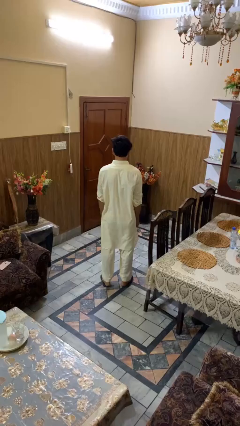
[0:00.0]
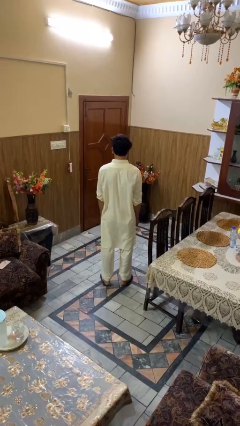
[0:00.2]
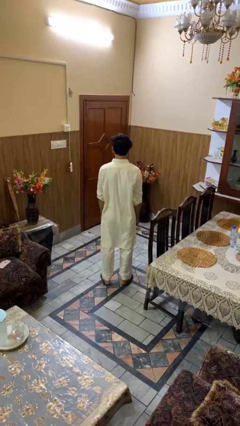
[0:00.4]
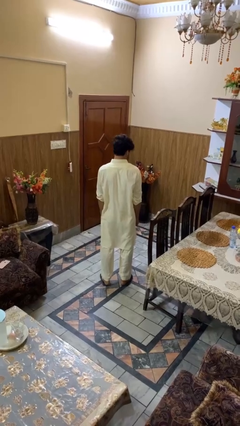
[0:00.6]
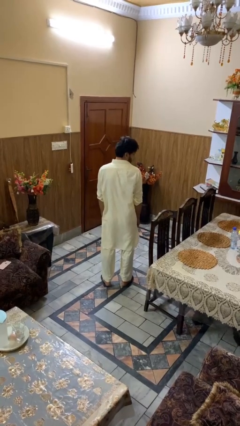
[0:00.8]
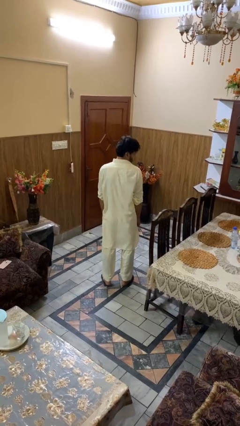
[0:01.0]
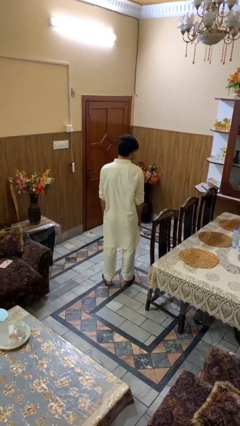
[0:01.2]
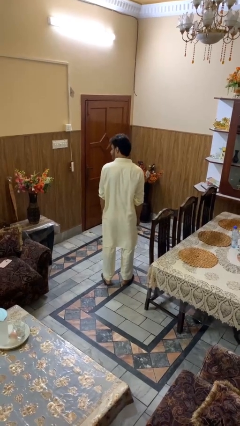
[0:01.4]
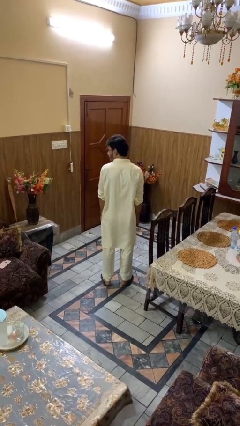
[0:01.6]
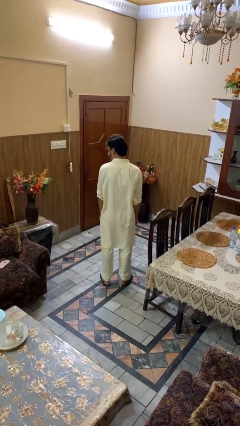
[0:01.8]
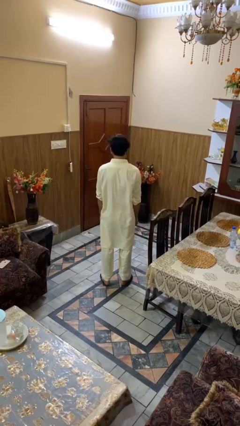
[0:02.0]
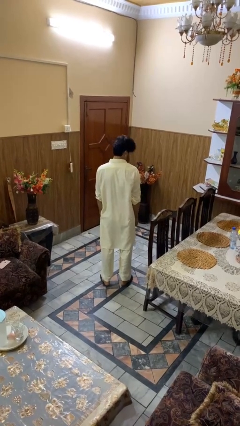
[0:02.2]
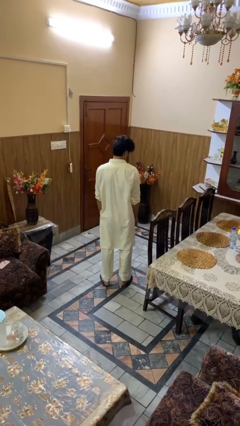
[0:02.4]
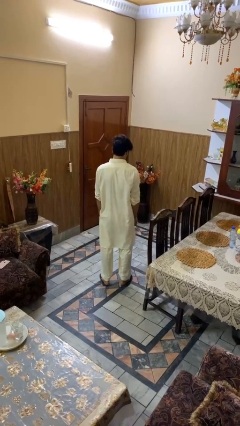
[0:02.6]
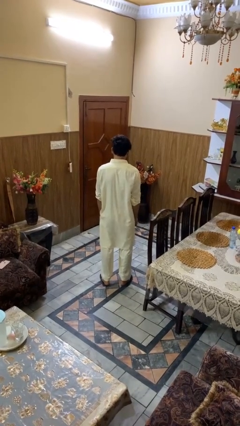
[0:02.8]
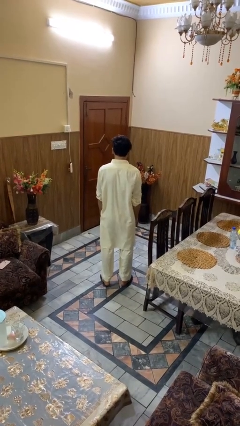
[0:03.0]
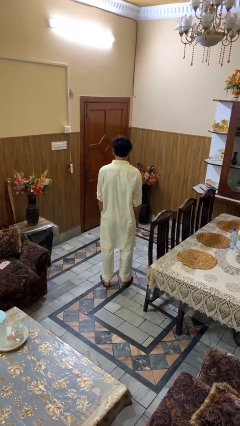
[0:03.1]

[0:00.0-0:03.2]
person shakes head

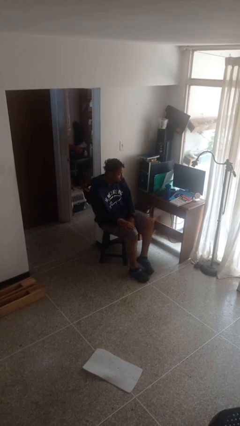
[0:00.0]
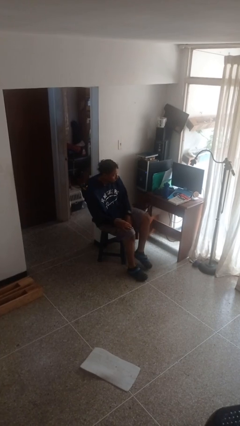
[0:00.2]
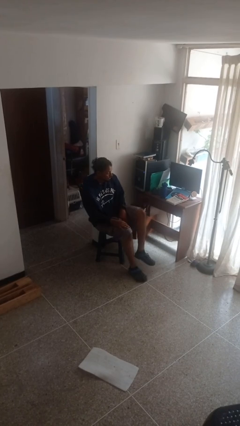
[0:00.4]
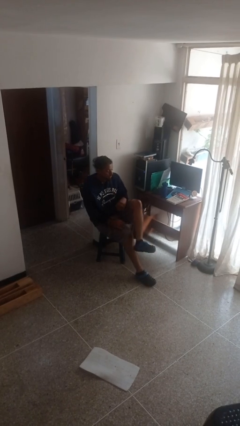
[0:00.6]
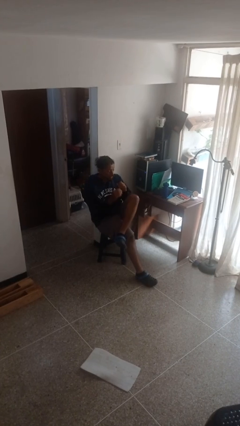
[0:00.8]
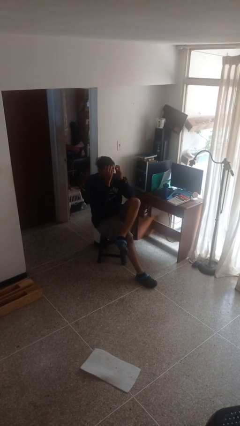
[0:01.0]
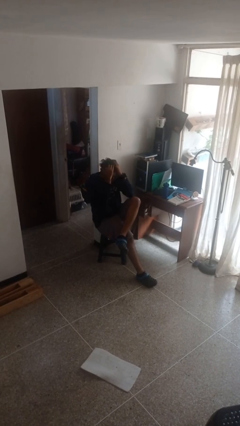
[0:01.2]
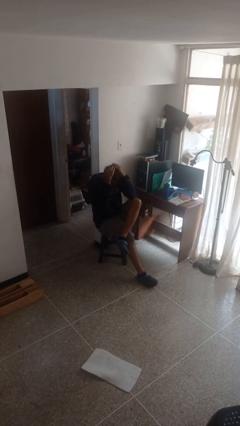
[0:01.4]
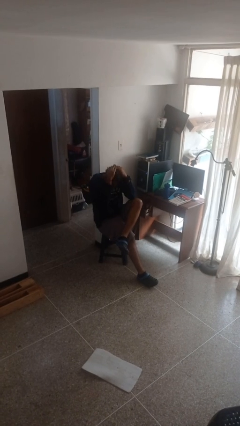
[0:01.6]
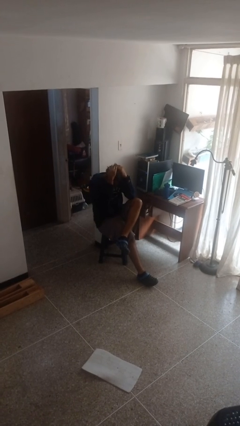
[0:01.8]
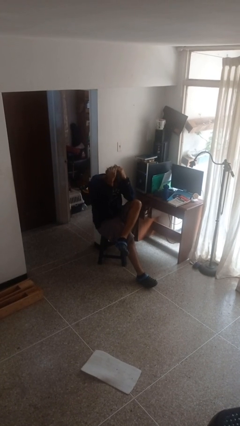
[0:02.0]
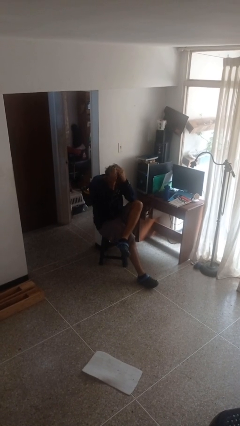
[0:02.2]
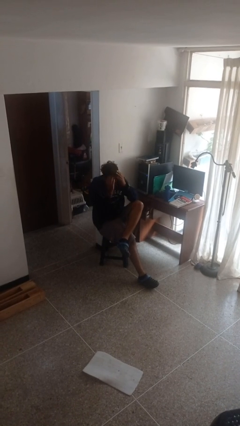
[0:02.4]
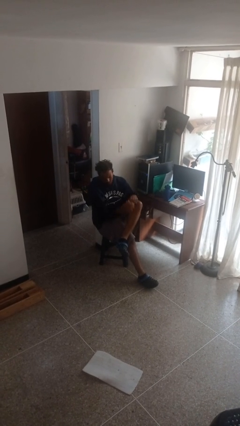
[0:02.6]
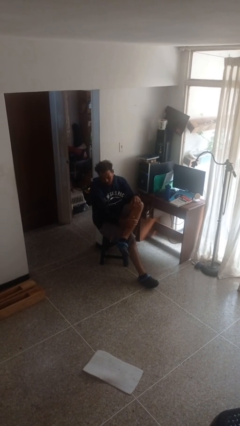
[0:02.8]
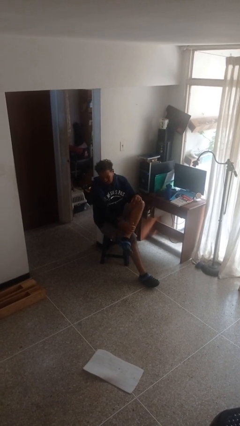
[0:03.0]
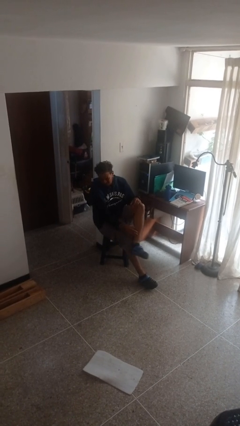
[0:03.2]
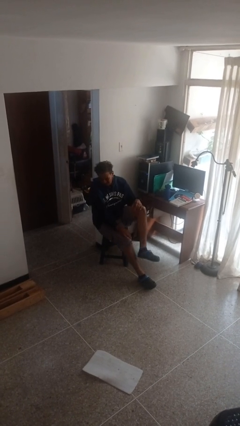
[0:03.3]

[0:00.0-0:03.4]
person scratches face

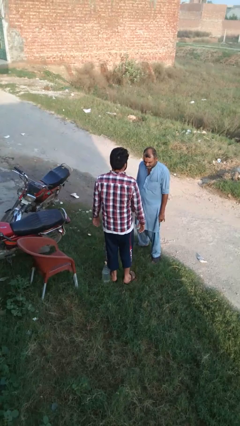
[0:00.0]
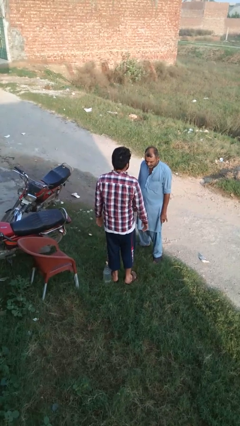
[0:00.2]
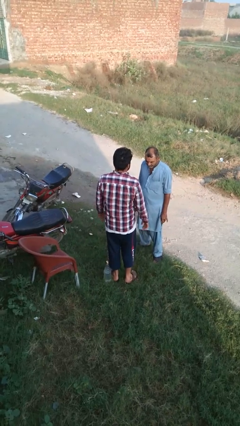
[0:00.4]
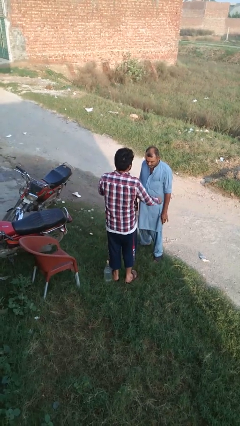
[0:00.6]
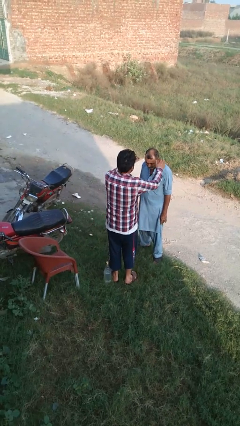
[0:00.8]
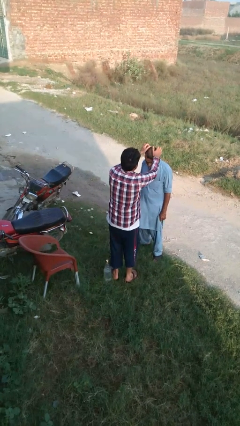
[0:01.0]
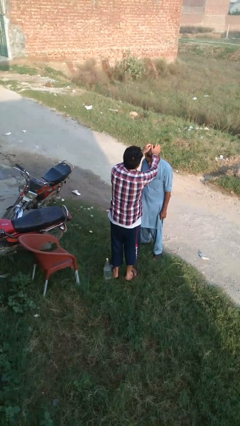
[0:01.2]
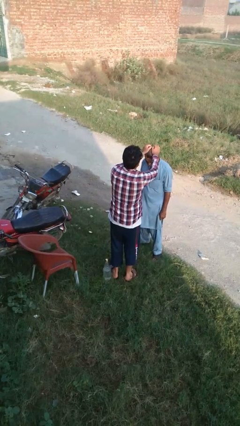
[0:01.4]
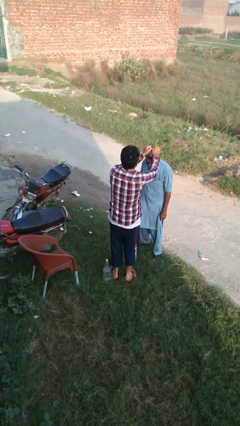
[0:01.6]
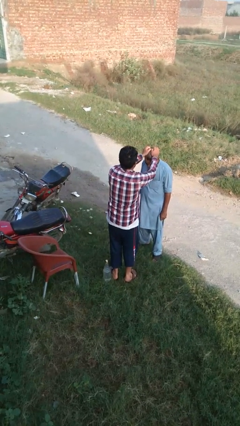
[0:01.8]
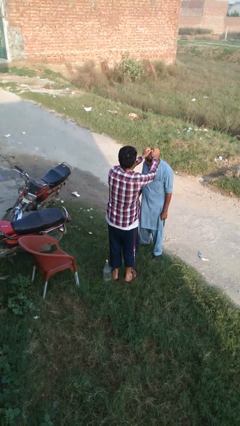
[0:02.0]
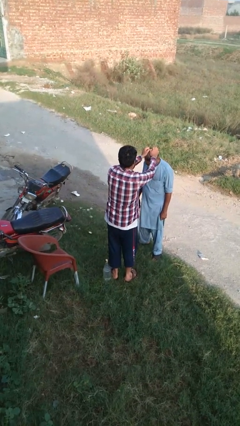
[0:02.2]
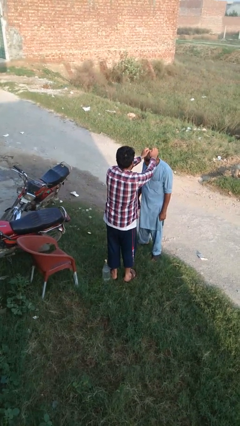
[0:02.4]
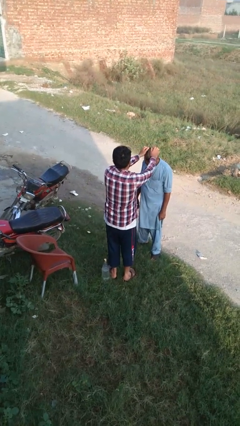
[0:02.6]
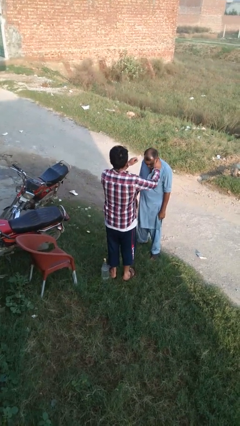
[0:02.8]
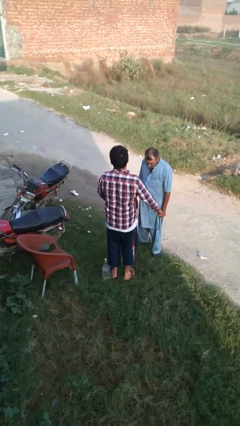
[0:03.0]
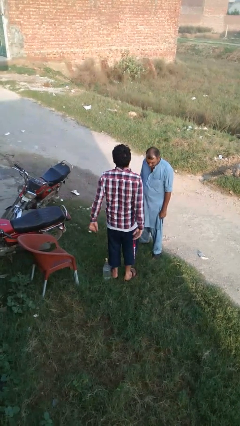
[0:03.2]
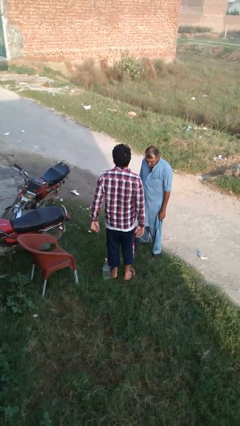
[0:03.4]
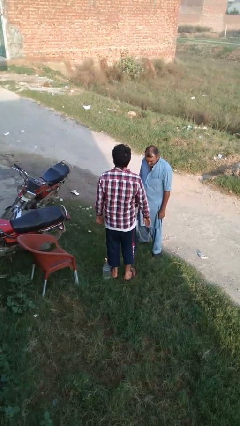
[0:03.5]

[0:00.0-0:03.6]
person grabs person by hair

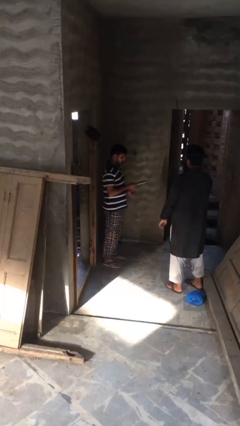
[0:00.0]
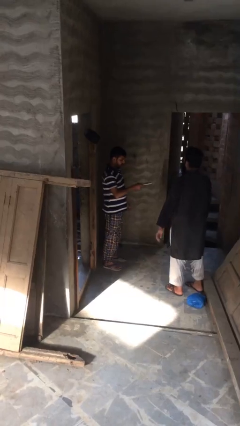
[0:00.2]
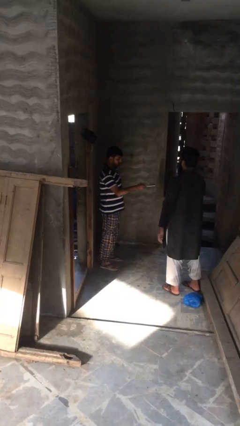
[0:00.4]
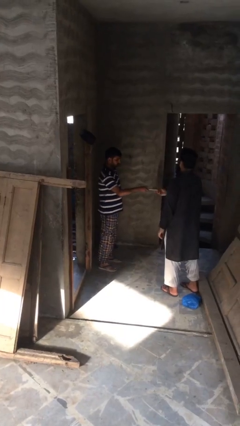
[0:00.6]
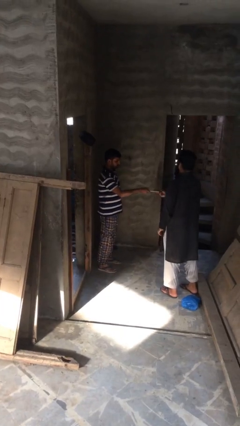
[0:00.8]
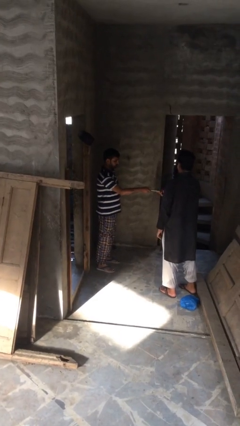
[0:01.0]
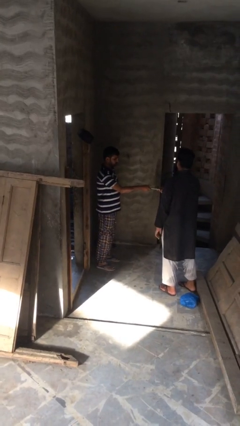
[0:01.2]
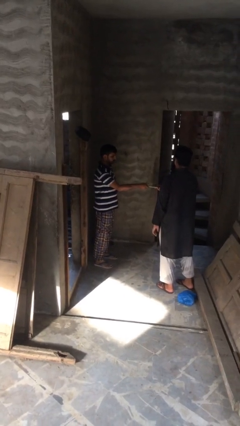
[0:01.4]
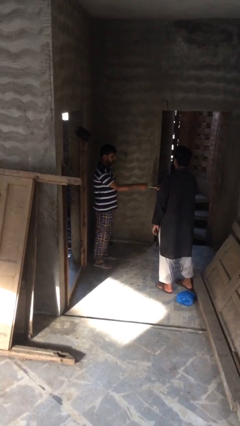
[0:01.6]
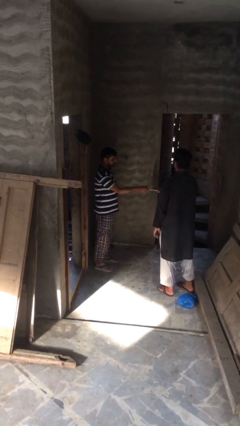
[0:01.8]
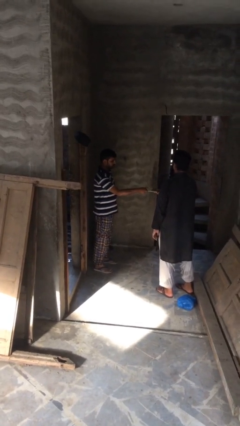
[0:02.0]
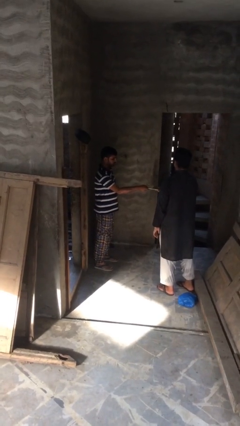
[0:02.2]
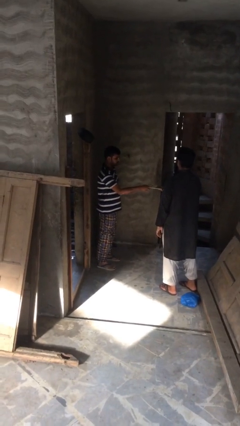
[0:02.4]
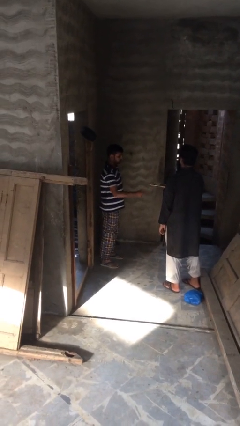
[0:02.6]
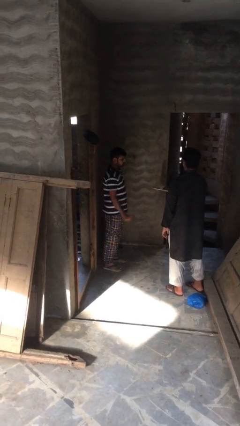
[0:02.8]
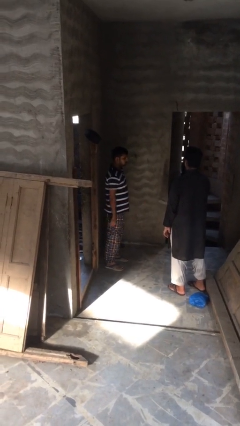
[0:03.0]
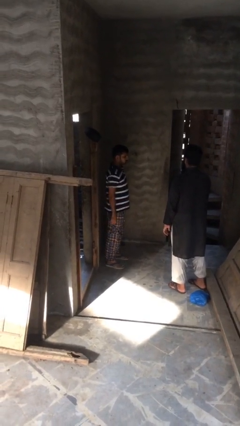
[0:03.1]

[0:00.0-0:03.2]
person transfers object to person

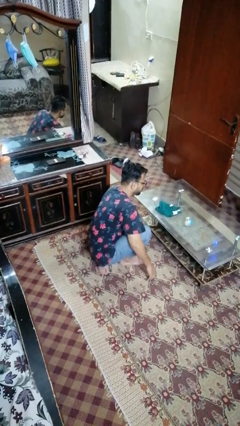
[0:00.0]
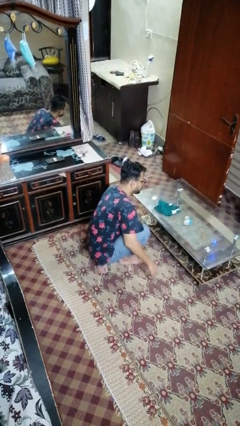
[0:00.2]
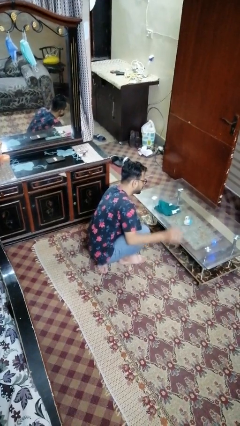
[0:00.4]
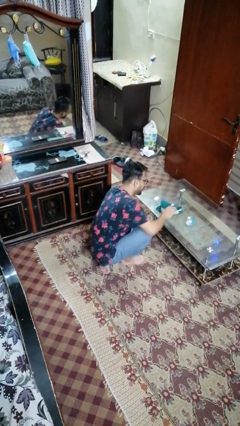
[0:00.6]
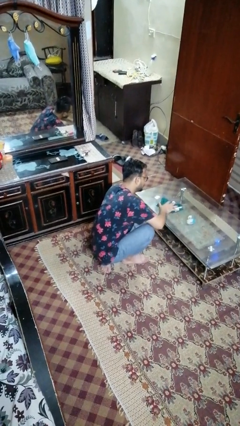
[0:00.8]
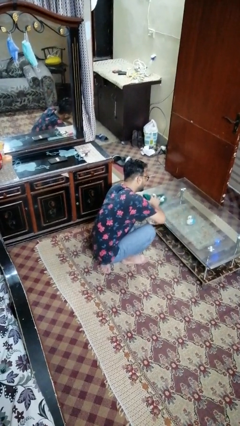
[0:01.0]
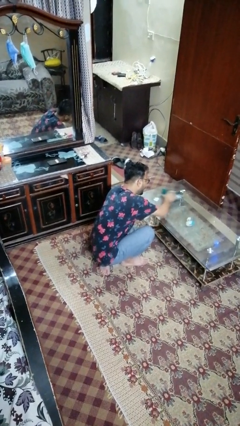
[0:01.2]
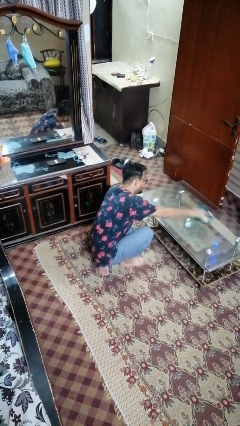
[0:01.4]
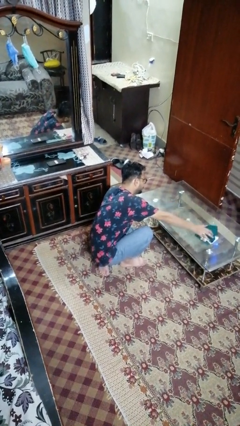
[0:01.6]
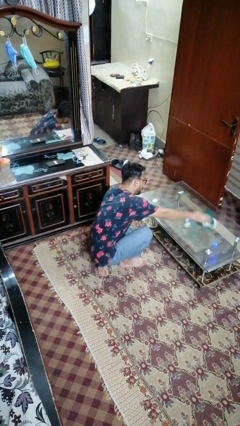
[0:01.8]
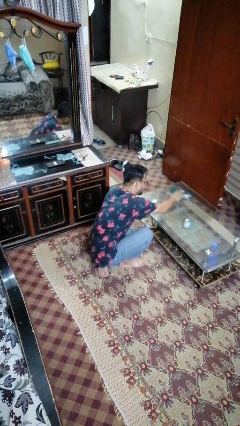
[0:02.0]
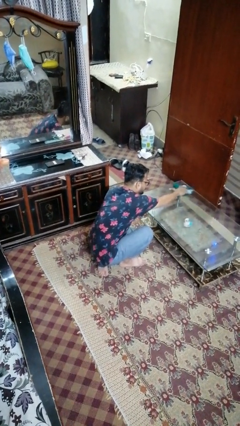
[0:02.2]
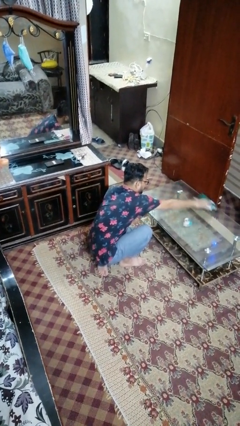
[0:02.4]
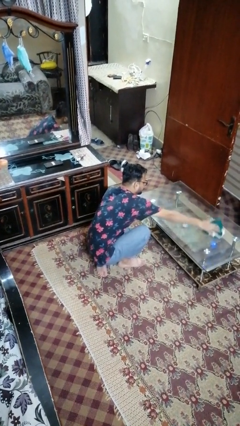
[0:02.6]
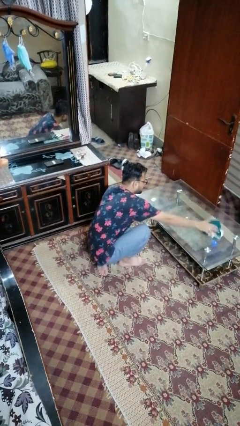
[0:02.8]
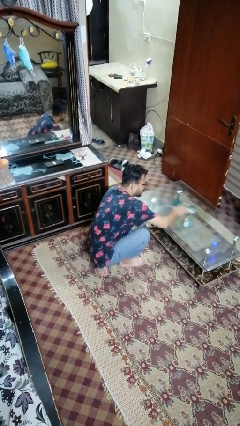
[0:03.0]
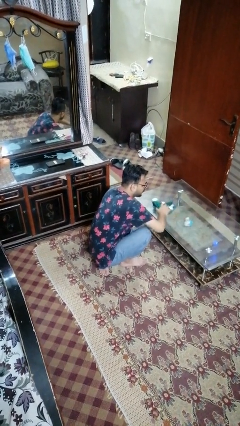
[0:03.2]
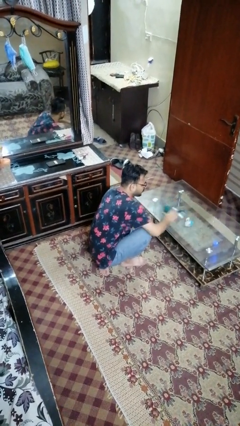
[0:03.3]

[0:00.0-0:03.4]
person cleans table with rag

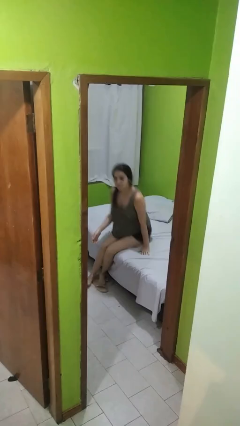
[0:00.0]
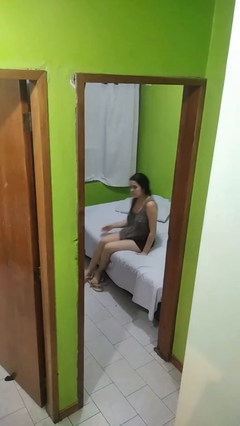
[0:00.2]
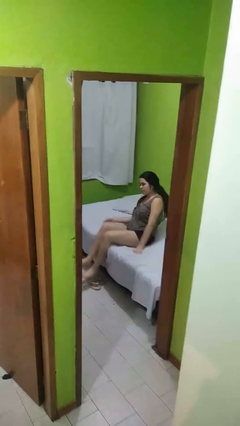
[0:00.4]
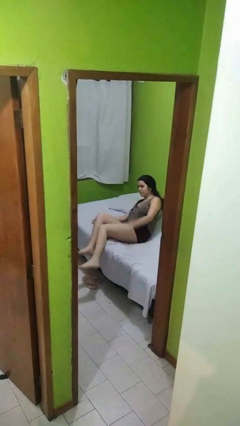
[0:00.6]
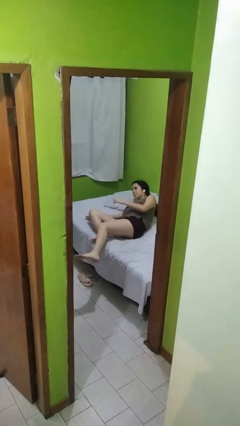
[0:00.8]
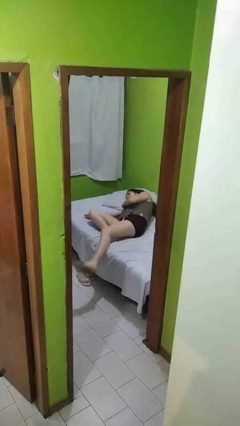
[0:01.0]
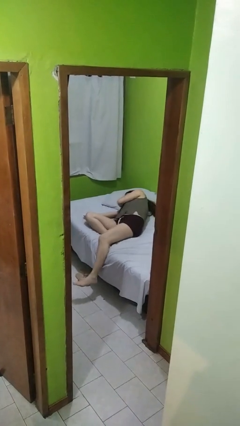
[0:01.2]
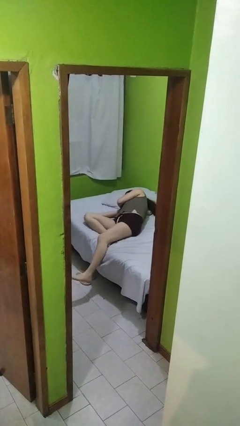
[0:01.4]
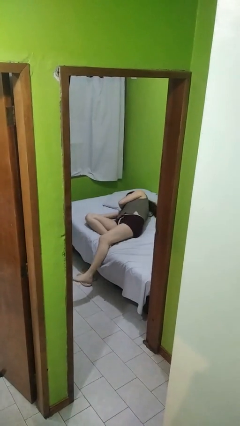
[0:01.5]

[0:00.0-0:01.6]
person lies down on bed
